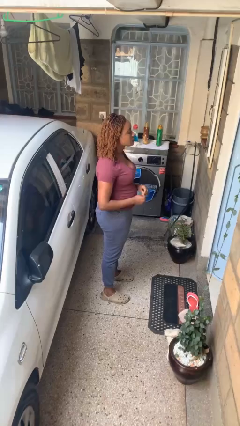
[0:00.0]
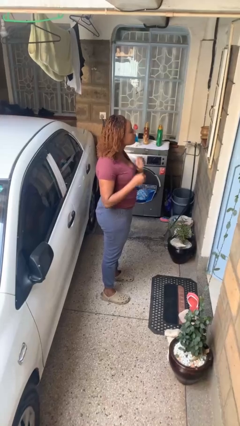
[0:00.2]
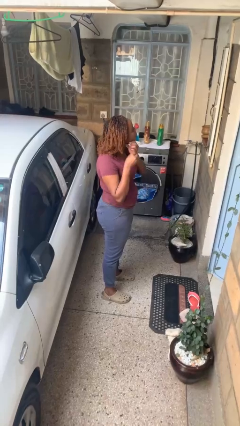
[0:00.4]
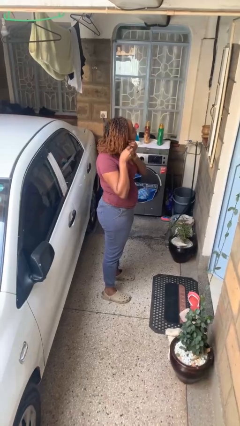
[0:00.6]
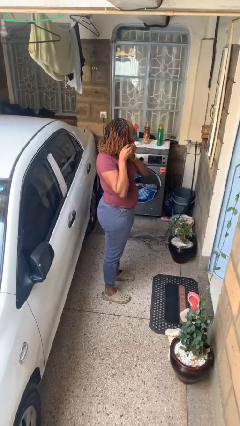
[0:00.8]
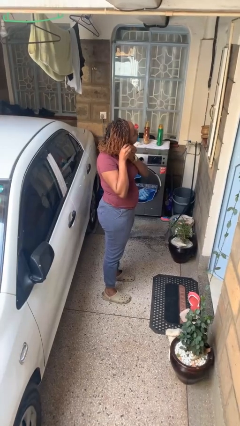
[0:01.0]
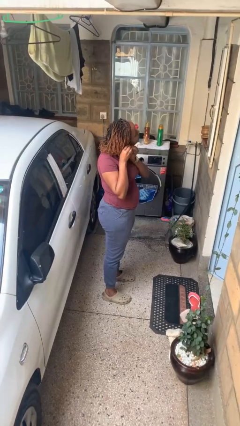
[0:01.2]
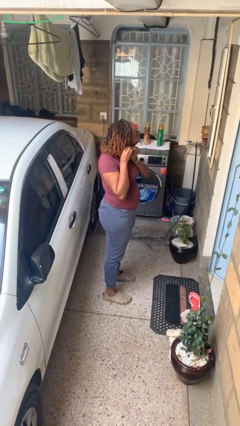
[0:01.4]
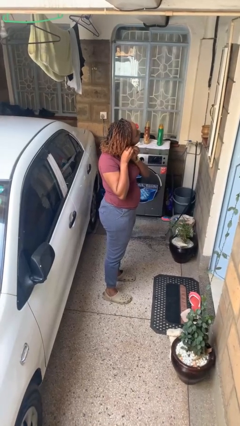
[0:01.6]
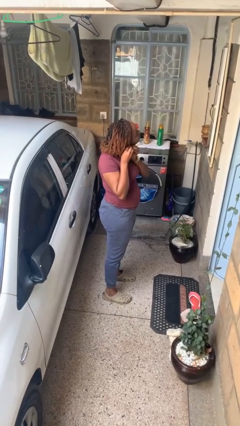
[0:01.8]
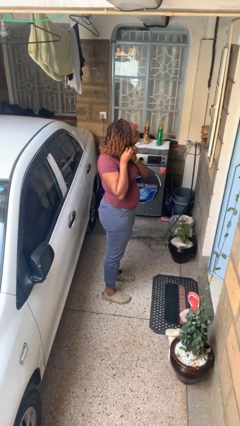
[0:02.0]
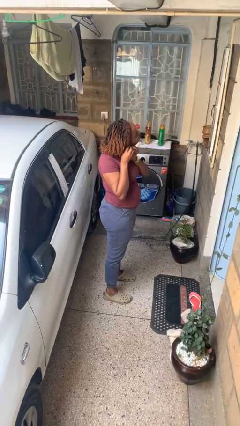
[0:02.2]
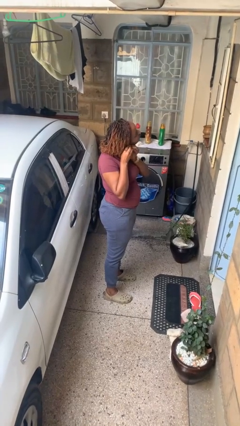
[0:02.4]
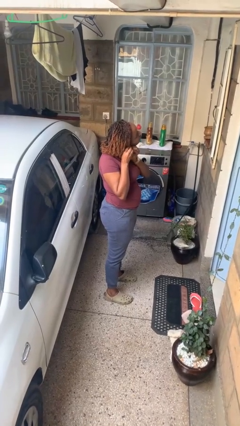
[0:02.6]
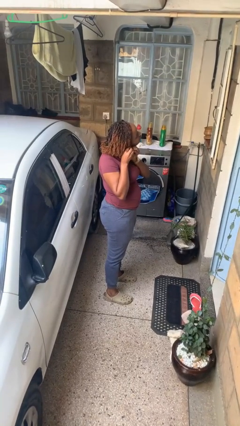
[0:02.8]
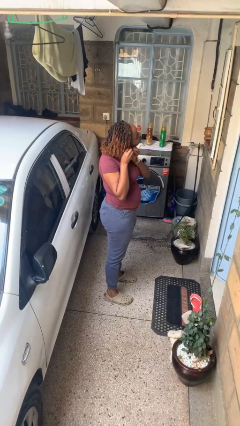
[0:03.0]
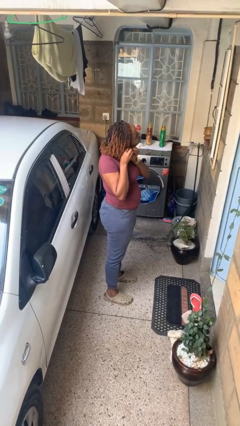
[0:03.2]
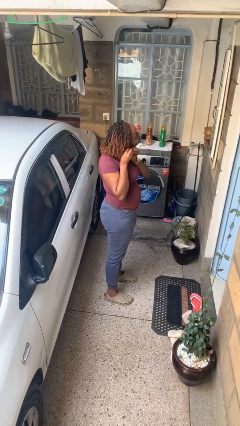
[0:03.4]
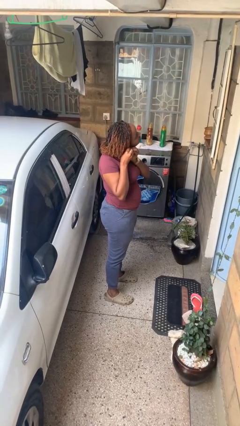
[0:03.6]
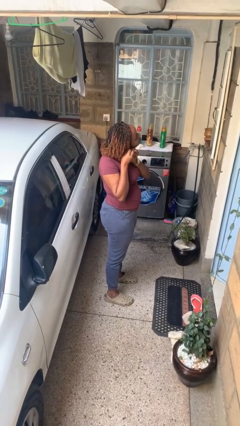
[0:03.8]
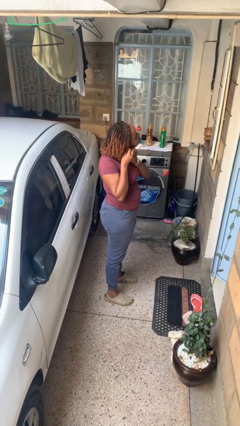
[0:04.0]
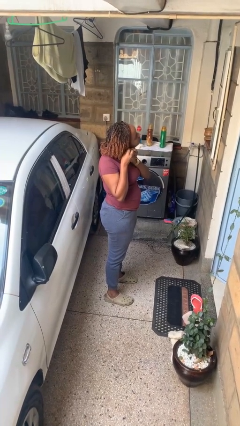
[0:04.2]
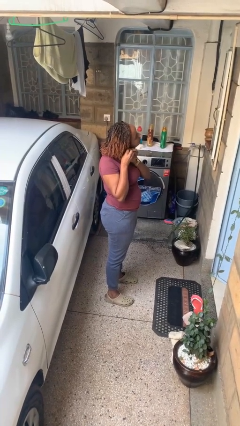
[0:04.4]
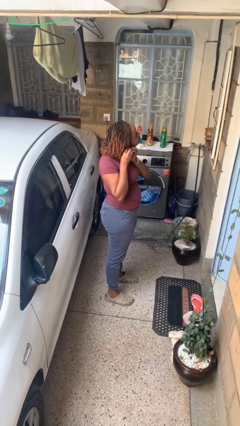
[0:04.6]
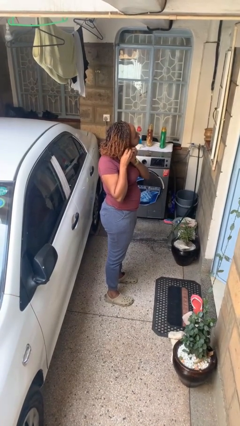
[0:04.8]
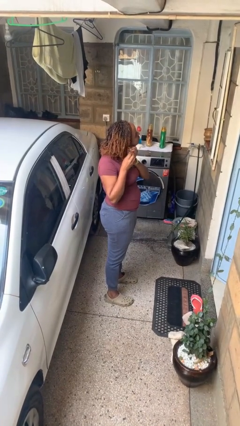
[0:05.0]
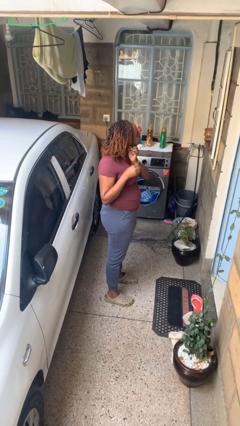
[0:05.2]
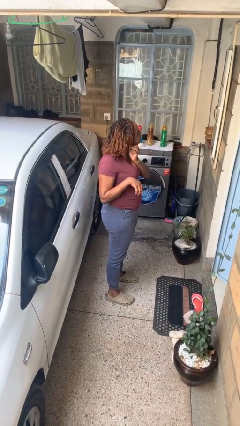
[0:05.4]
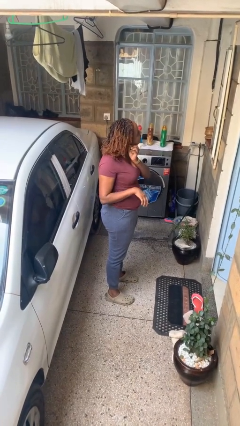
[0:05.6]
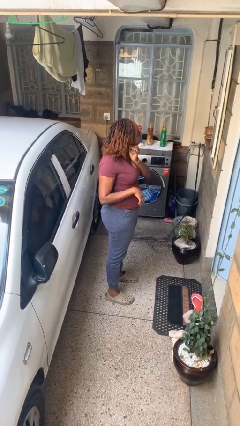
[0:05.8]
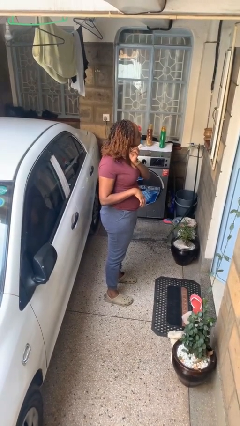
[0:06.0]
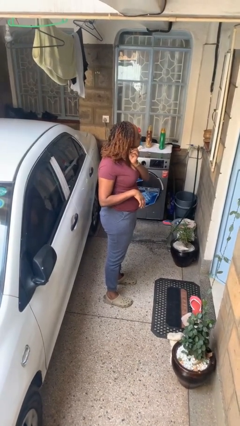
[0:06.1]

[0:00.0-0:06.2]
person puts on earrings

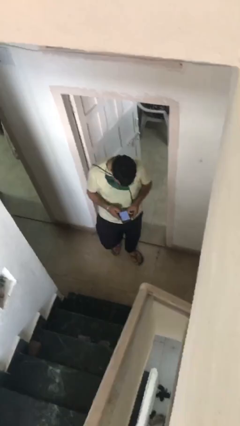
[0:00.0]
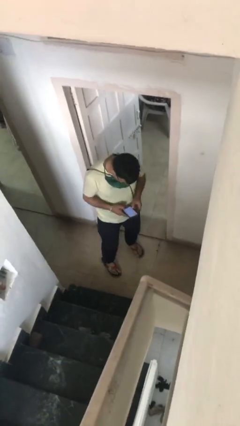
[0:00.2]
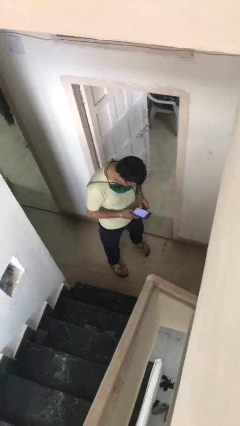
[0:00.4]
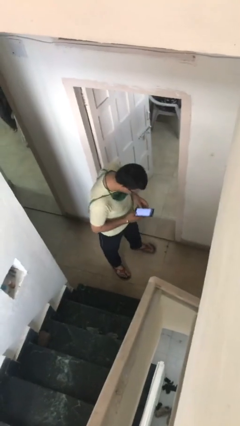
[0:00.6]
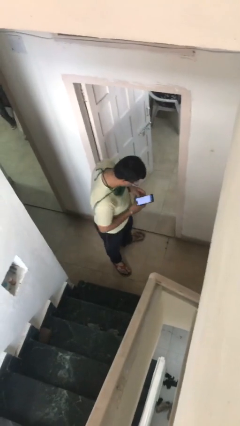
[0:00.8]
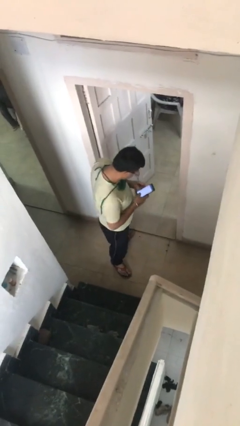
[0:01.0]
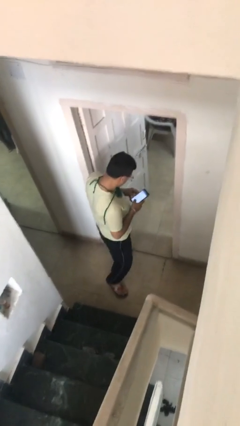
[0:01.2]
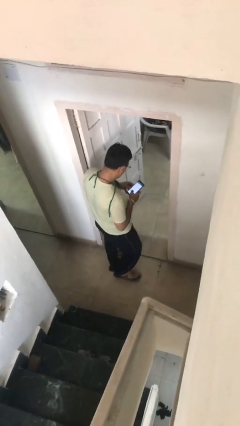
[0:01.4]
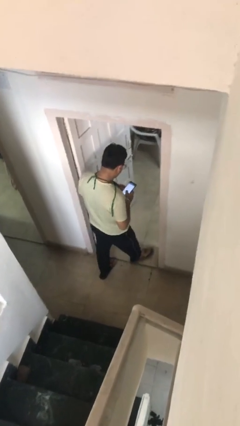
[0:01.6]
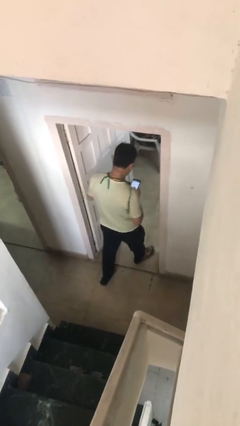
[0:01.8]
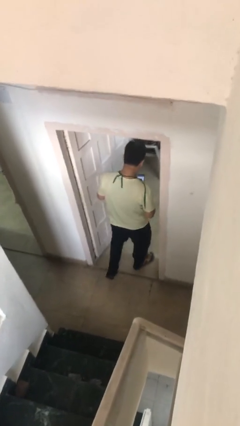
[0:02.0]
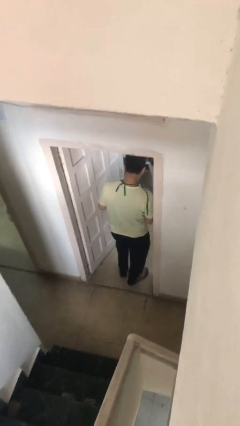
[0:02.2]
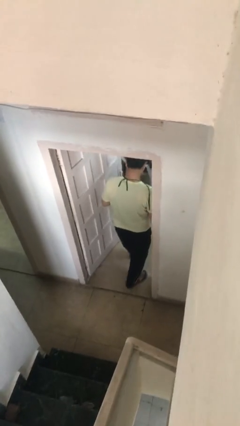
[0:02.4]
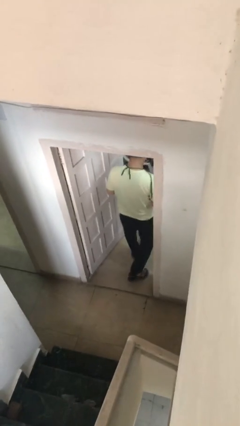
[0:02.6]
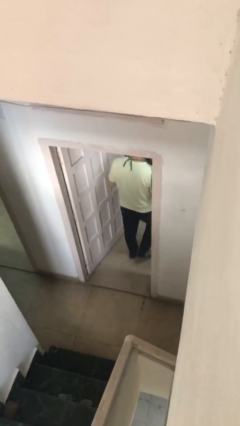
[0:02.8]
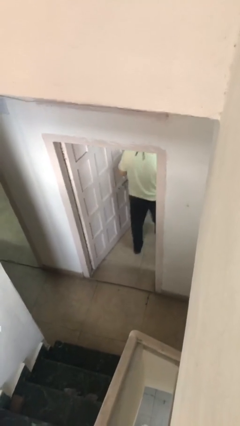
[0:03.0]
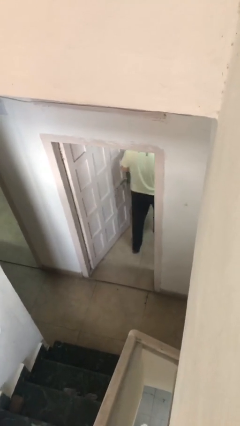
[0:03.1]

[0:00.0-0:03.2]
person exits scene through structure

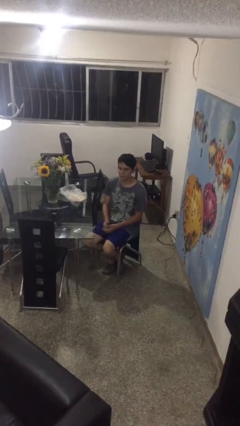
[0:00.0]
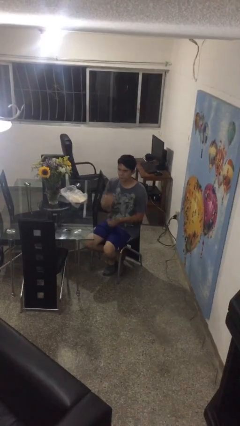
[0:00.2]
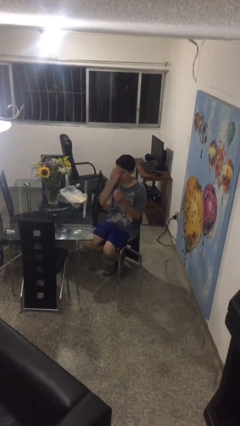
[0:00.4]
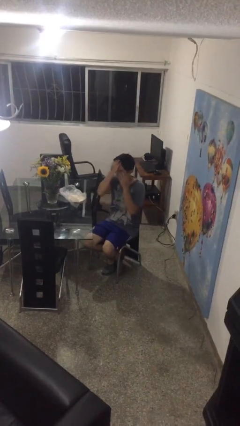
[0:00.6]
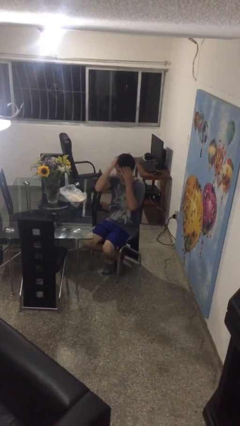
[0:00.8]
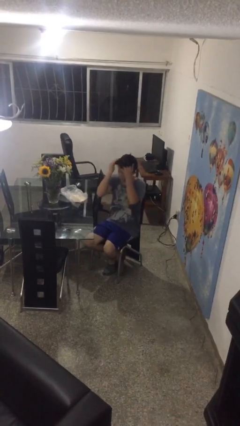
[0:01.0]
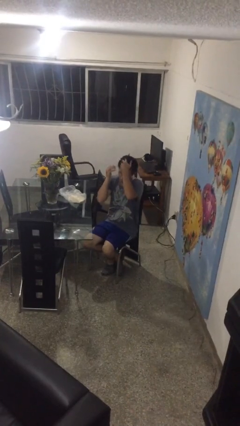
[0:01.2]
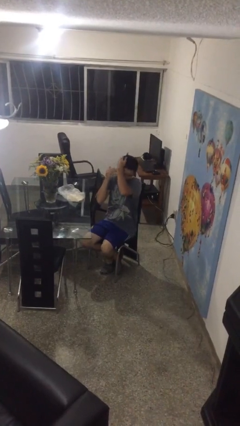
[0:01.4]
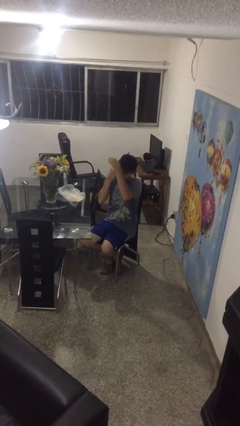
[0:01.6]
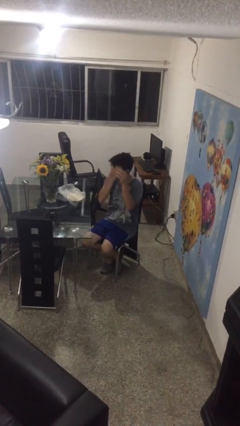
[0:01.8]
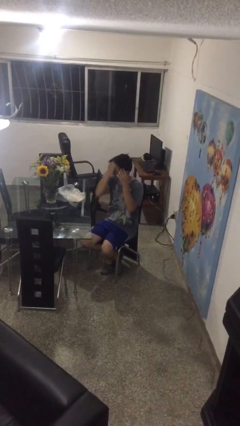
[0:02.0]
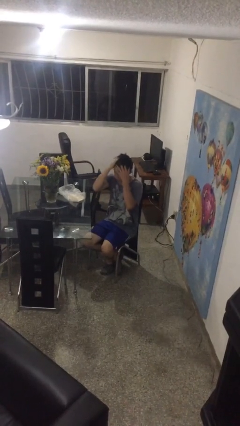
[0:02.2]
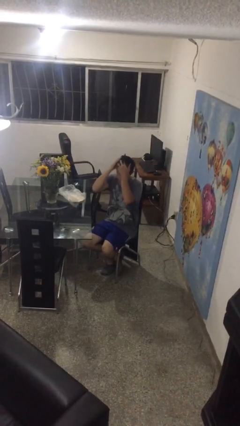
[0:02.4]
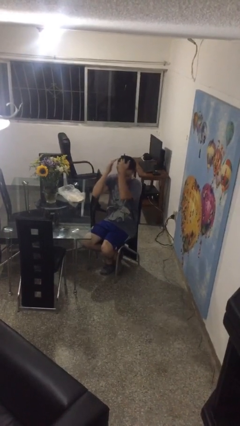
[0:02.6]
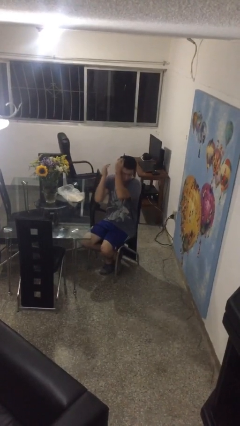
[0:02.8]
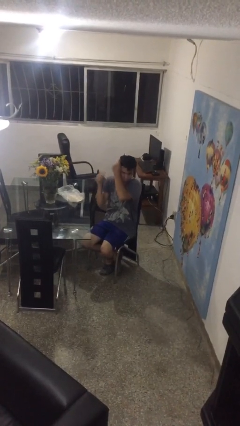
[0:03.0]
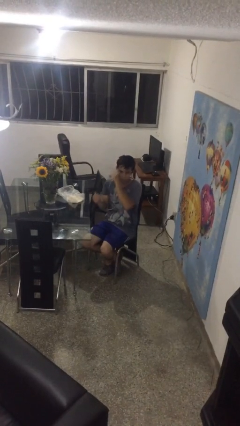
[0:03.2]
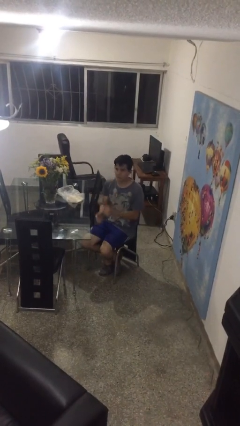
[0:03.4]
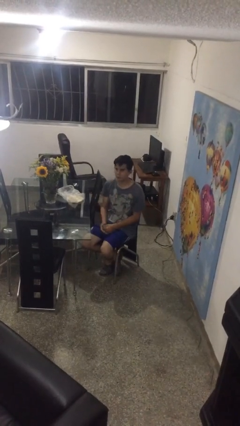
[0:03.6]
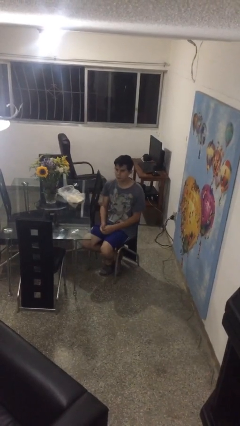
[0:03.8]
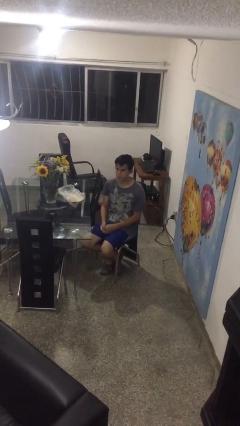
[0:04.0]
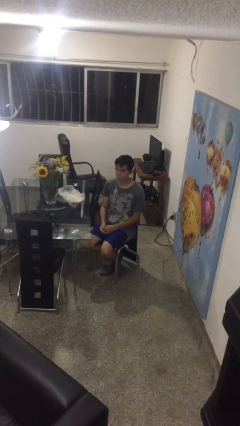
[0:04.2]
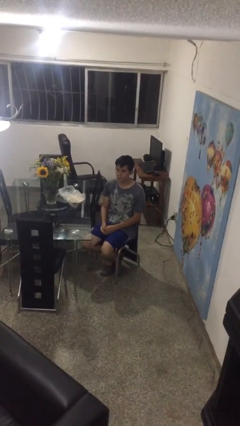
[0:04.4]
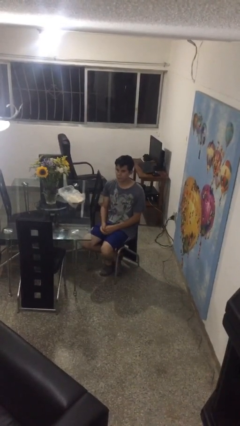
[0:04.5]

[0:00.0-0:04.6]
person strokes hair

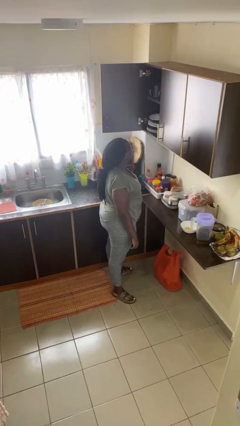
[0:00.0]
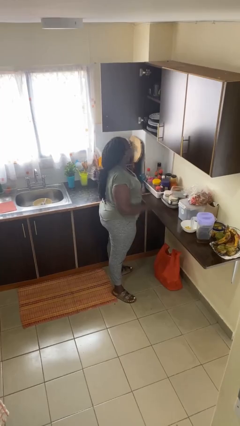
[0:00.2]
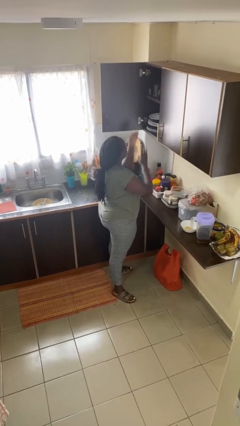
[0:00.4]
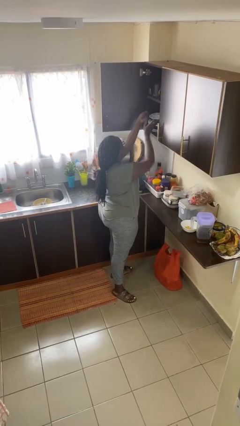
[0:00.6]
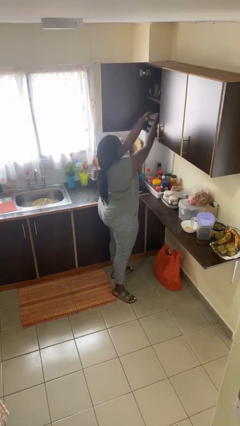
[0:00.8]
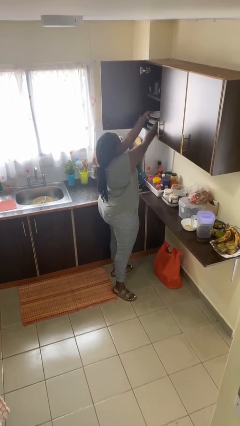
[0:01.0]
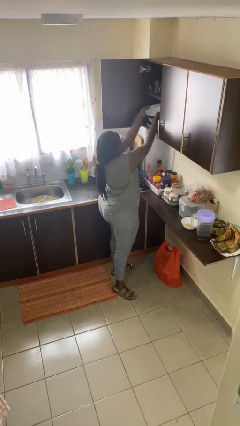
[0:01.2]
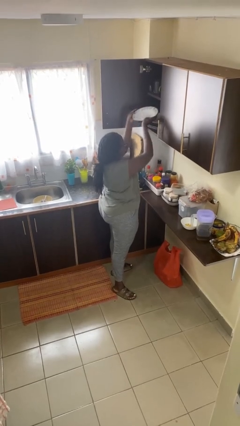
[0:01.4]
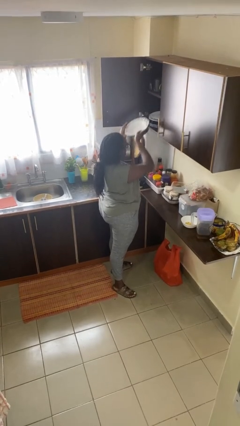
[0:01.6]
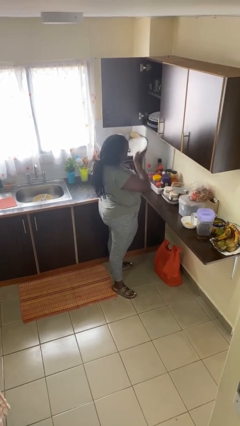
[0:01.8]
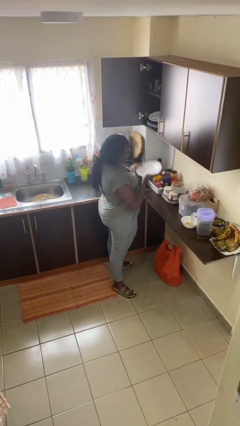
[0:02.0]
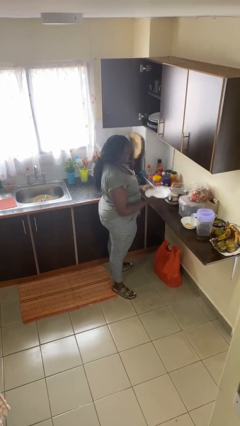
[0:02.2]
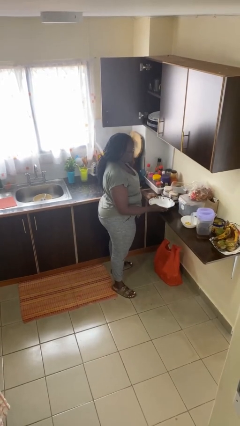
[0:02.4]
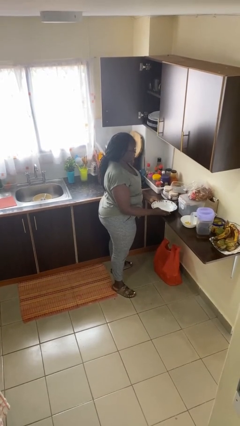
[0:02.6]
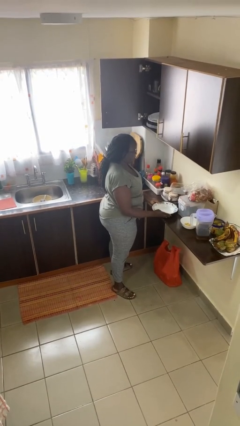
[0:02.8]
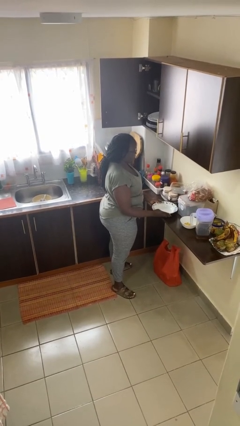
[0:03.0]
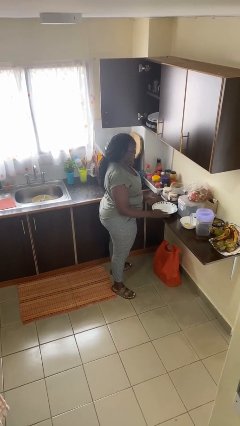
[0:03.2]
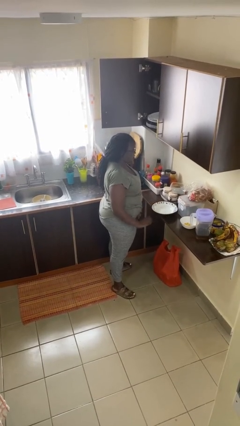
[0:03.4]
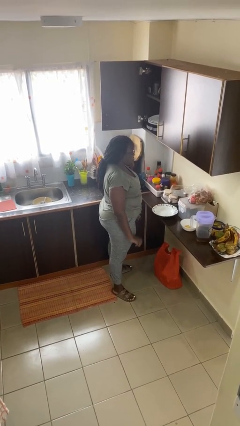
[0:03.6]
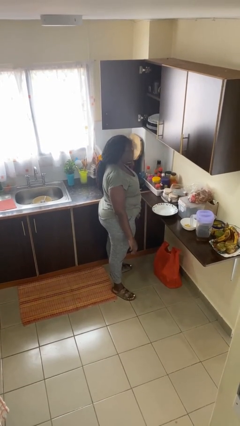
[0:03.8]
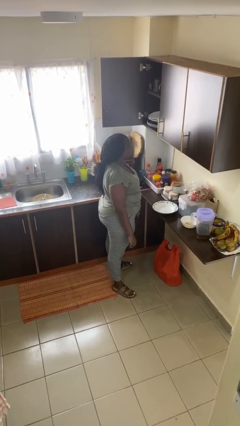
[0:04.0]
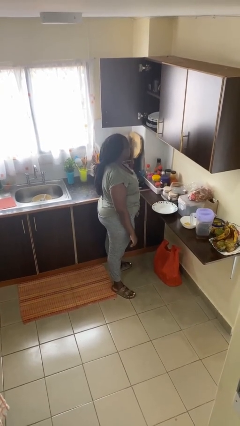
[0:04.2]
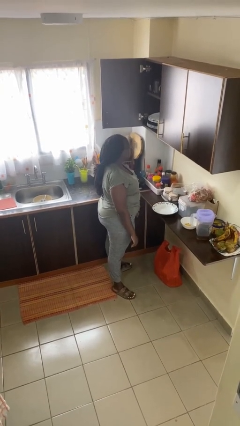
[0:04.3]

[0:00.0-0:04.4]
person takes object from cabinet
